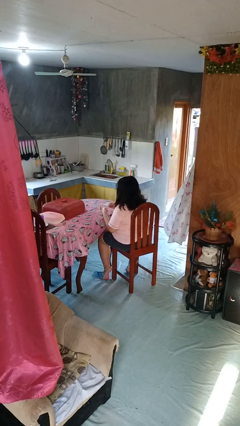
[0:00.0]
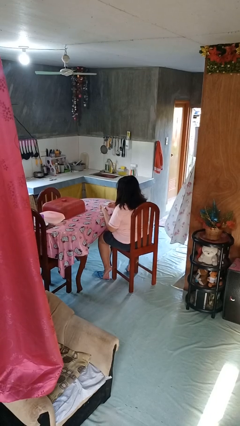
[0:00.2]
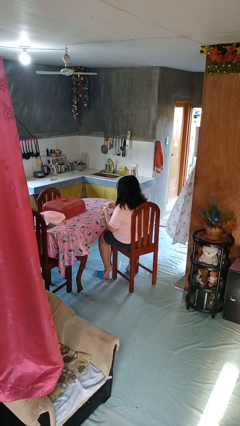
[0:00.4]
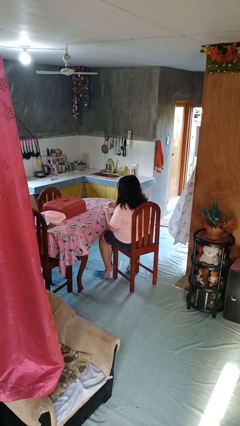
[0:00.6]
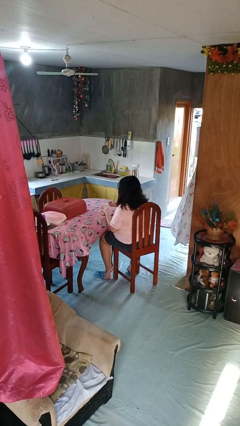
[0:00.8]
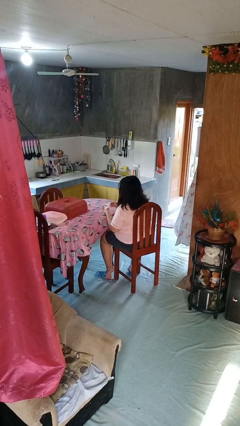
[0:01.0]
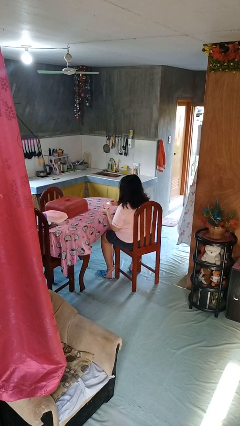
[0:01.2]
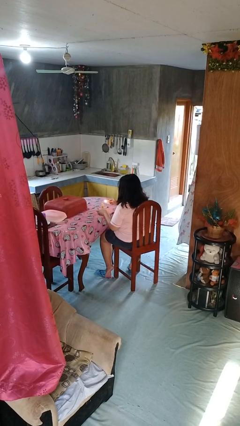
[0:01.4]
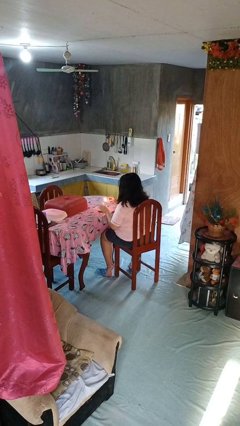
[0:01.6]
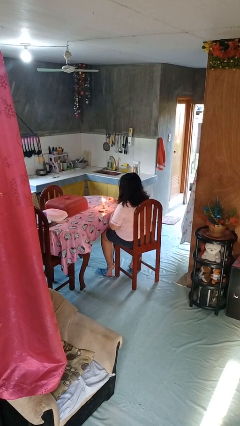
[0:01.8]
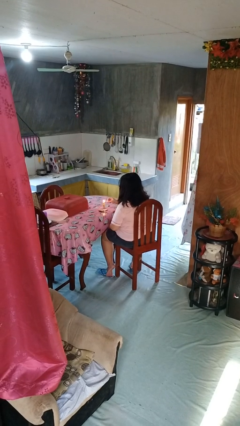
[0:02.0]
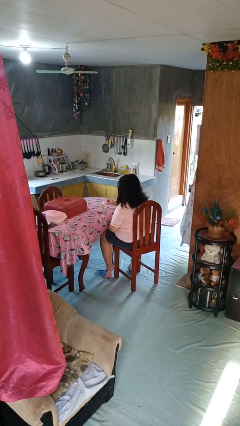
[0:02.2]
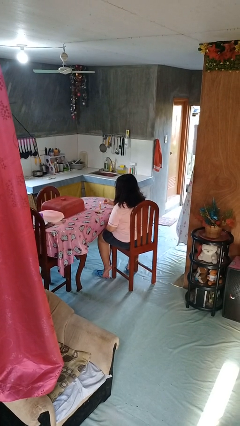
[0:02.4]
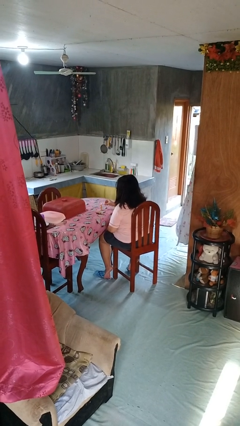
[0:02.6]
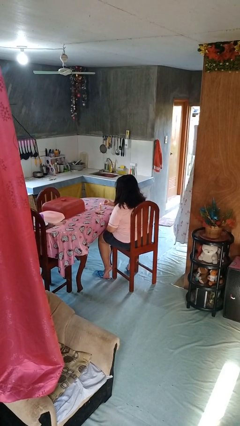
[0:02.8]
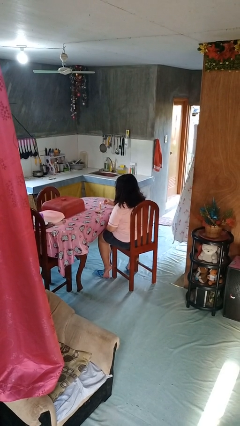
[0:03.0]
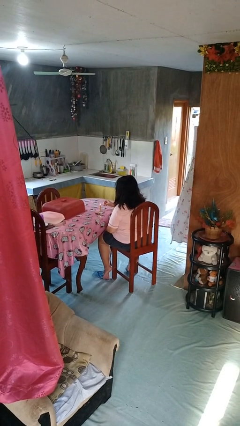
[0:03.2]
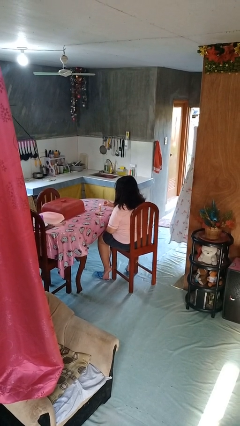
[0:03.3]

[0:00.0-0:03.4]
person lights candle

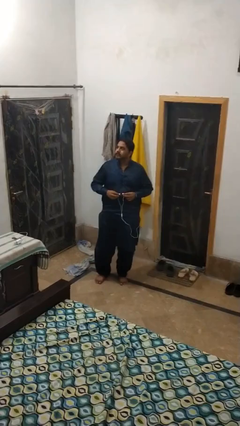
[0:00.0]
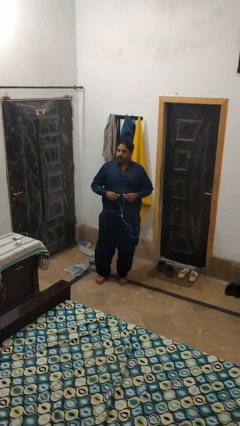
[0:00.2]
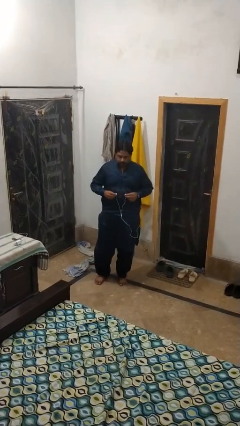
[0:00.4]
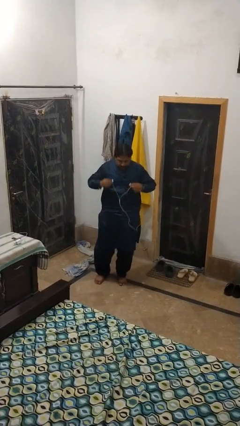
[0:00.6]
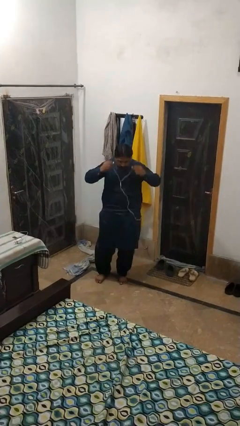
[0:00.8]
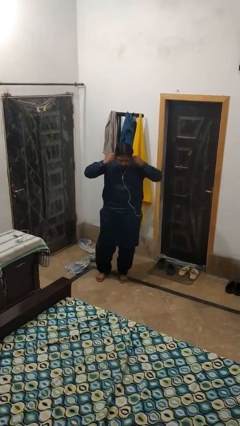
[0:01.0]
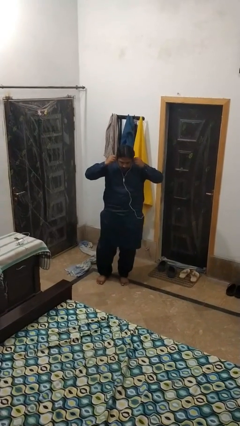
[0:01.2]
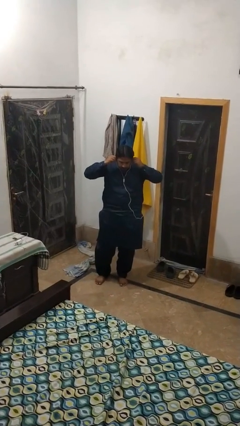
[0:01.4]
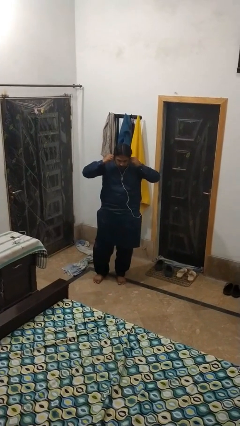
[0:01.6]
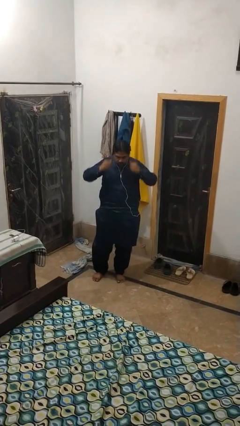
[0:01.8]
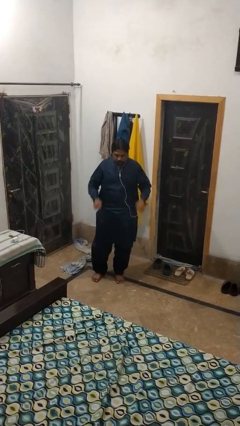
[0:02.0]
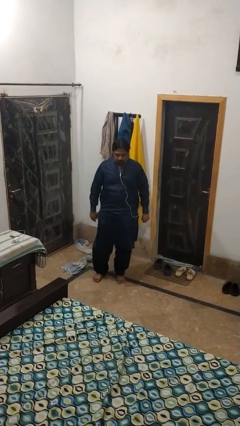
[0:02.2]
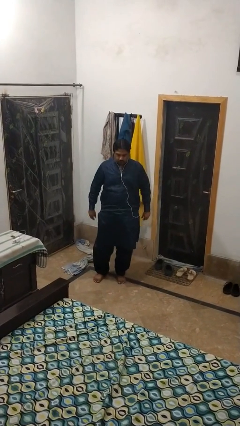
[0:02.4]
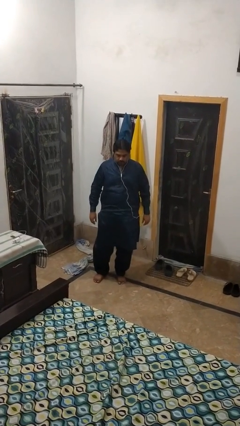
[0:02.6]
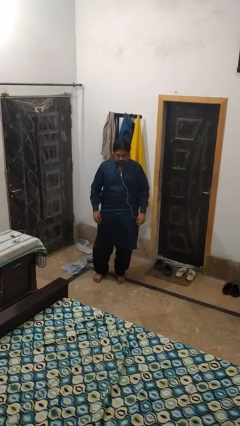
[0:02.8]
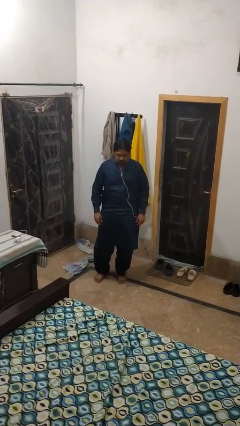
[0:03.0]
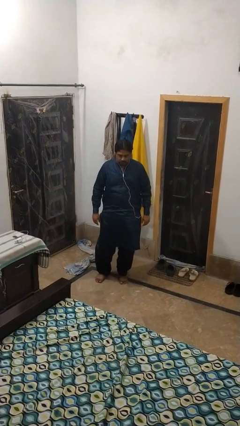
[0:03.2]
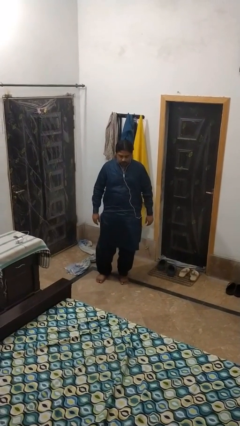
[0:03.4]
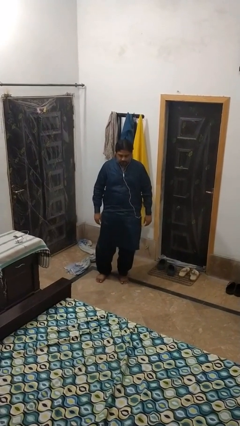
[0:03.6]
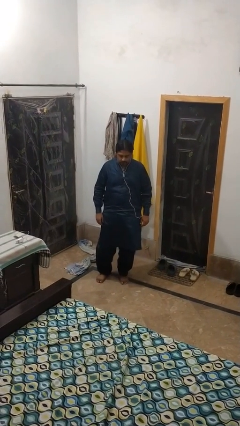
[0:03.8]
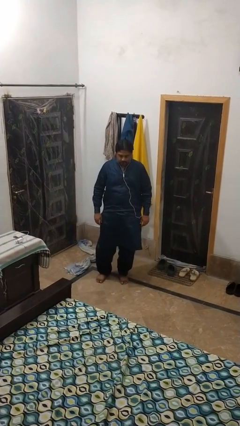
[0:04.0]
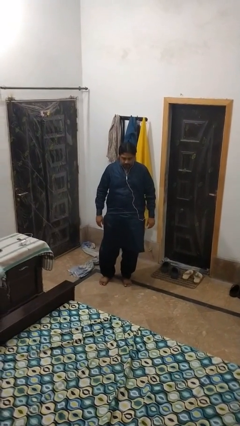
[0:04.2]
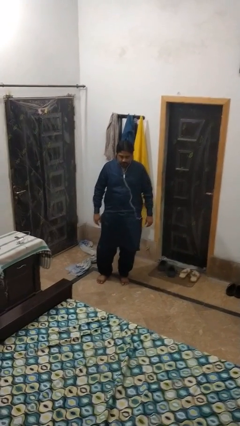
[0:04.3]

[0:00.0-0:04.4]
person puts on headphones

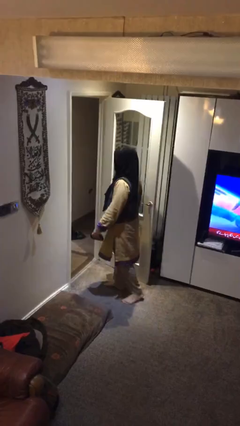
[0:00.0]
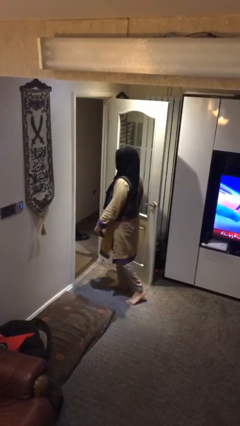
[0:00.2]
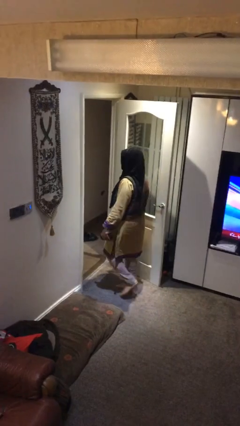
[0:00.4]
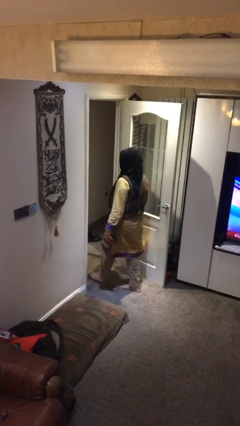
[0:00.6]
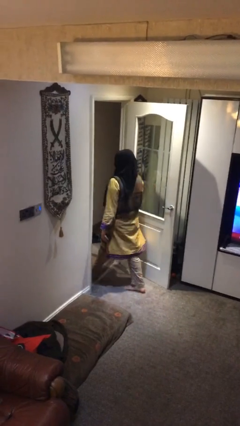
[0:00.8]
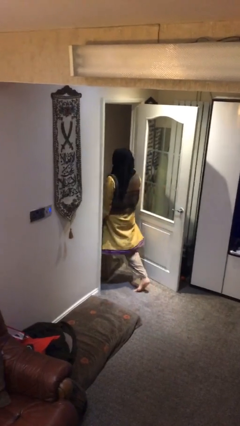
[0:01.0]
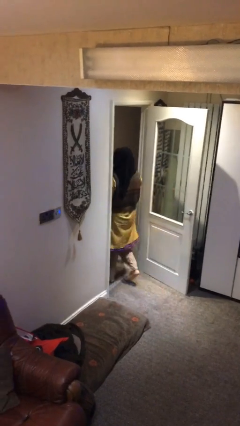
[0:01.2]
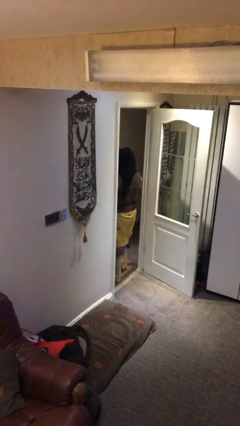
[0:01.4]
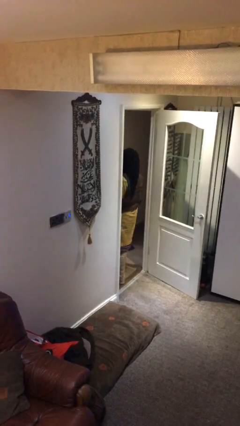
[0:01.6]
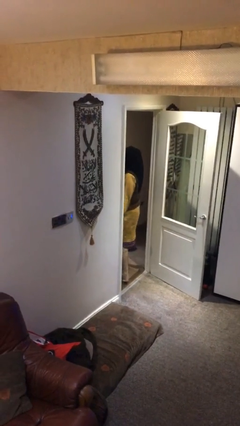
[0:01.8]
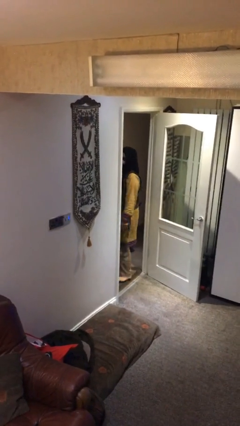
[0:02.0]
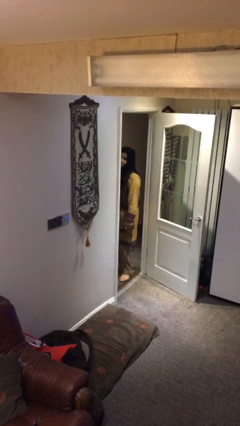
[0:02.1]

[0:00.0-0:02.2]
person exits scene through structure

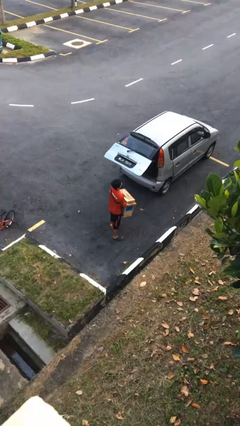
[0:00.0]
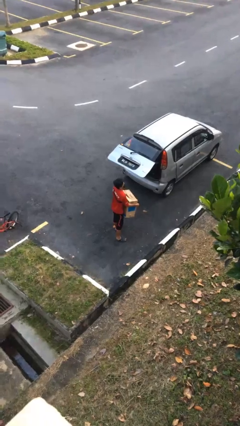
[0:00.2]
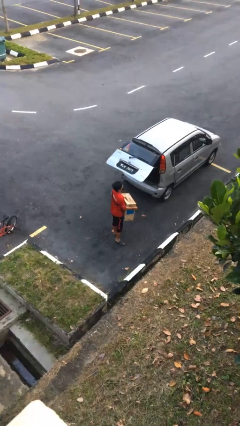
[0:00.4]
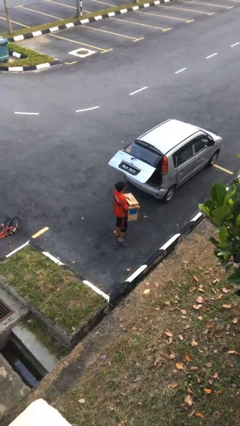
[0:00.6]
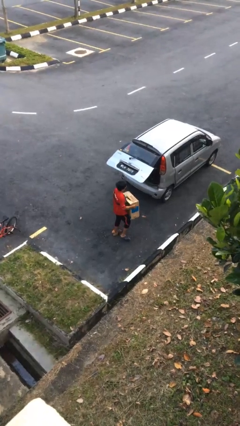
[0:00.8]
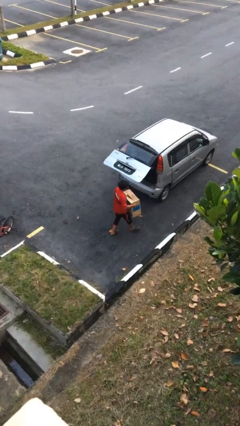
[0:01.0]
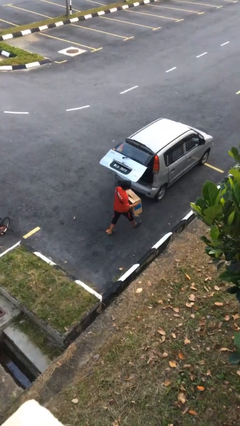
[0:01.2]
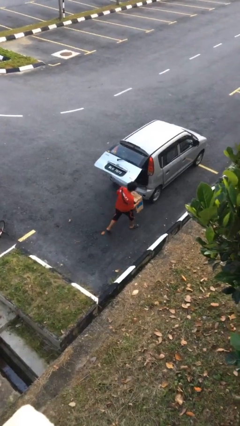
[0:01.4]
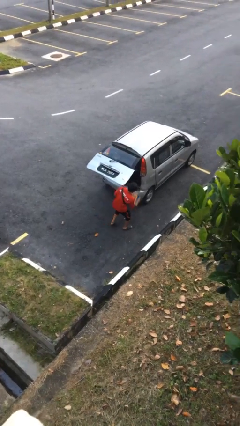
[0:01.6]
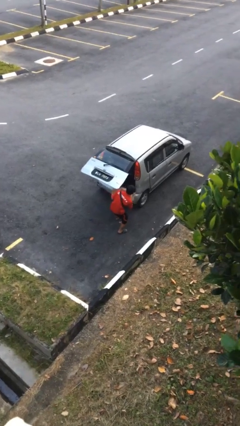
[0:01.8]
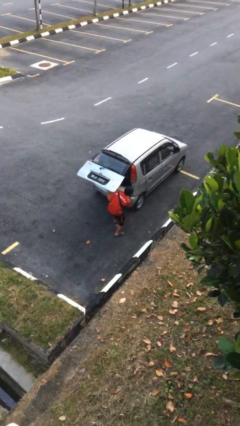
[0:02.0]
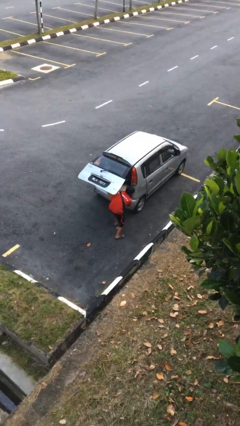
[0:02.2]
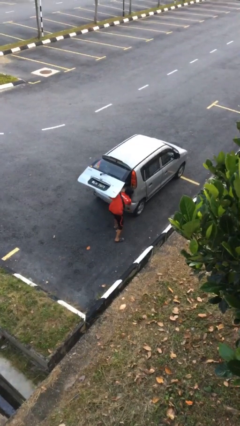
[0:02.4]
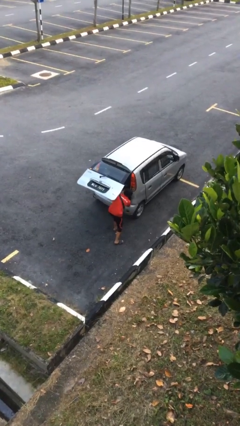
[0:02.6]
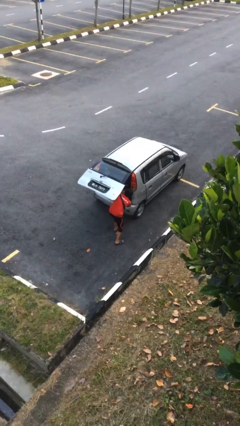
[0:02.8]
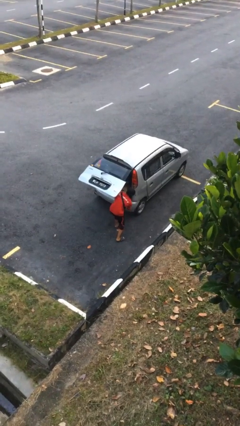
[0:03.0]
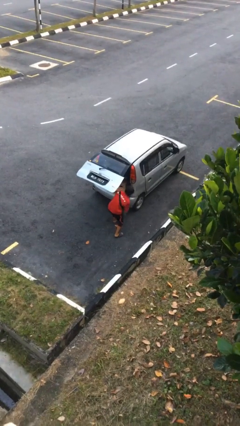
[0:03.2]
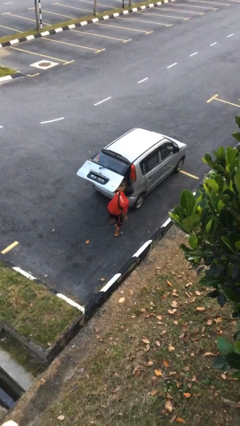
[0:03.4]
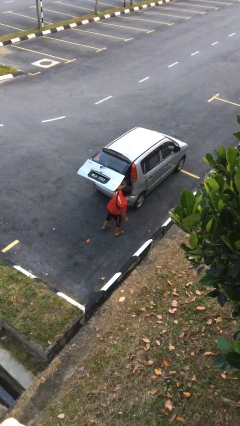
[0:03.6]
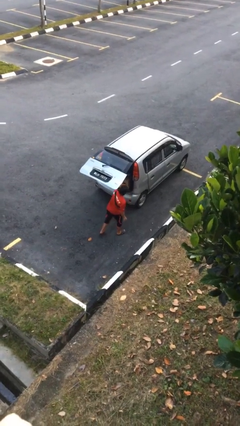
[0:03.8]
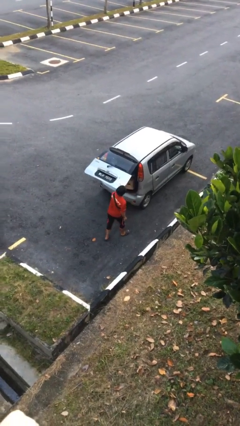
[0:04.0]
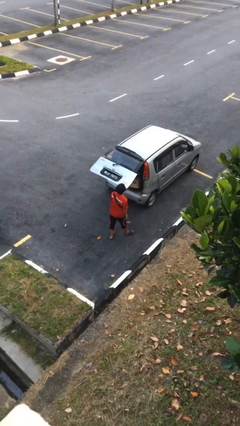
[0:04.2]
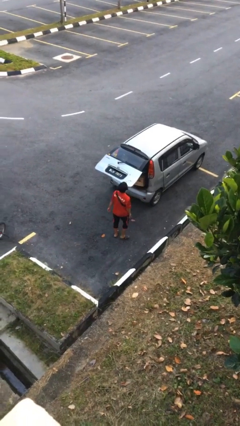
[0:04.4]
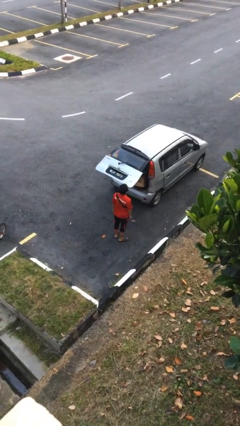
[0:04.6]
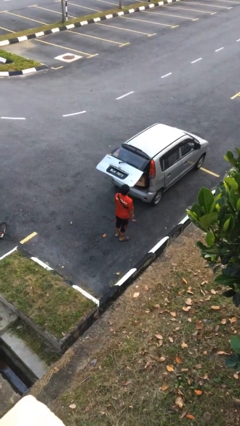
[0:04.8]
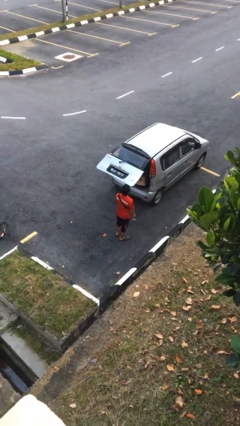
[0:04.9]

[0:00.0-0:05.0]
person loads car

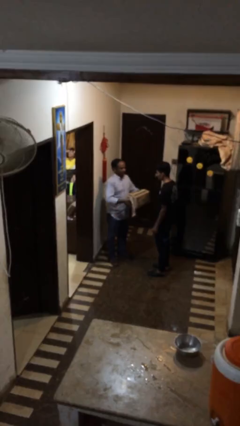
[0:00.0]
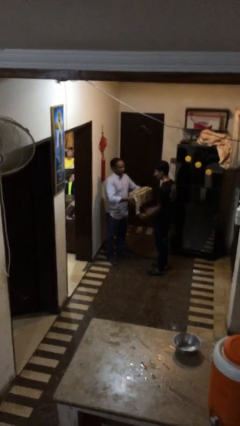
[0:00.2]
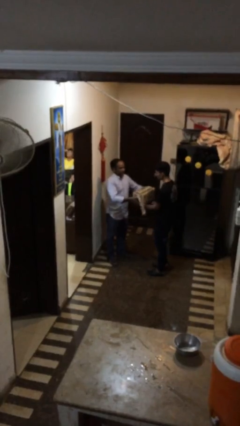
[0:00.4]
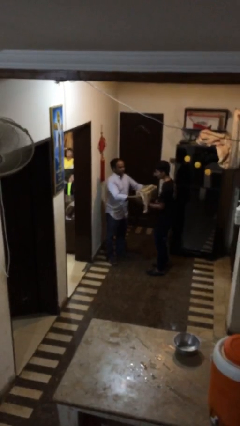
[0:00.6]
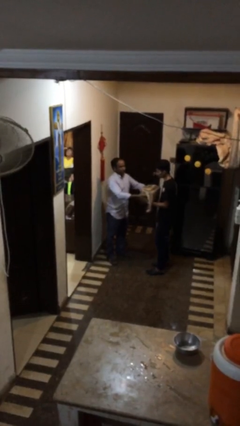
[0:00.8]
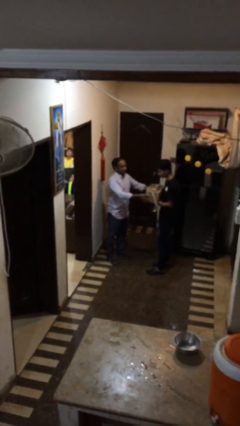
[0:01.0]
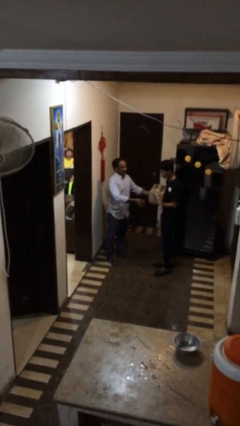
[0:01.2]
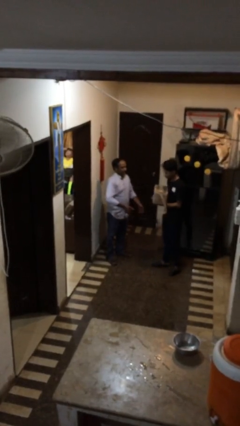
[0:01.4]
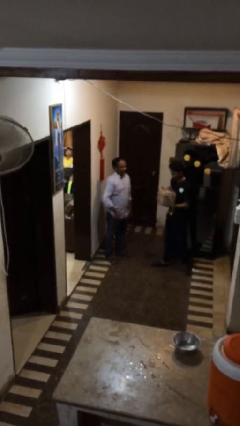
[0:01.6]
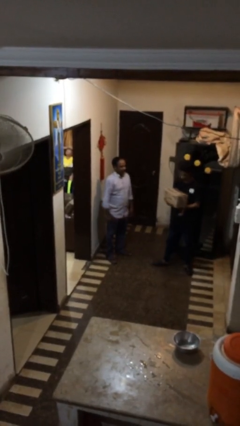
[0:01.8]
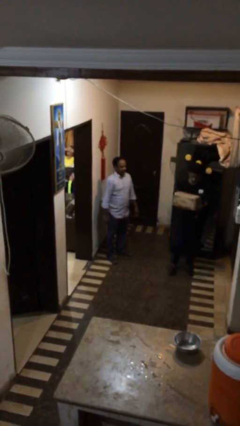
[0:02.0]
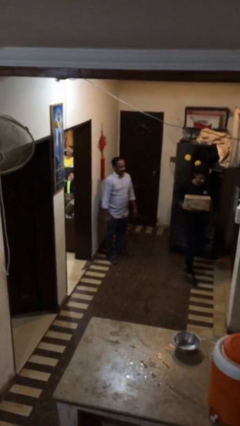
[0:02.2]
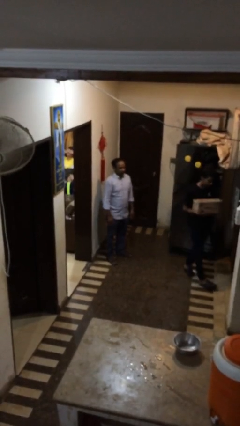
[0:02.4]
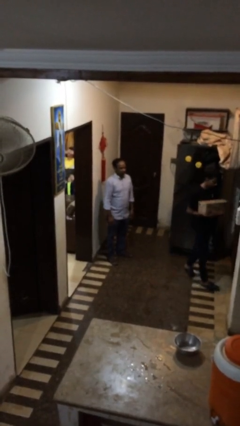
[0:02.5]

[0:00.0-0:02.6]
person transfers object to person
